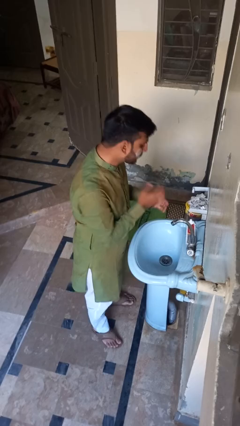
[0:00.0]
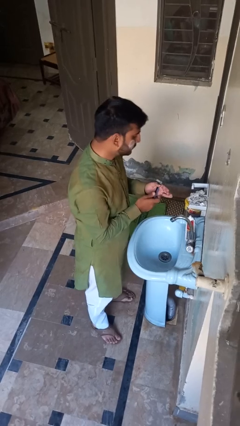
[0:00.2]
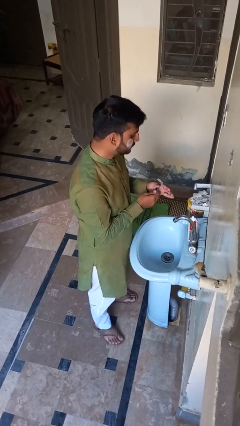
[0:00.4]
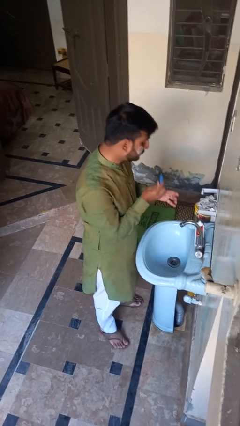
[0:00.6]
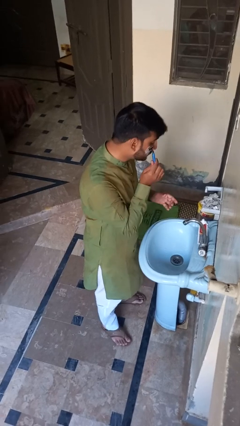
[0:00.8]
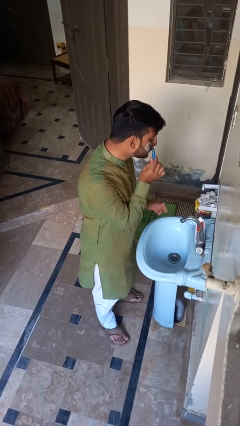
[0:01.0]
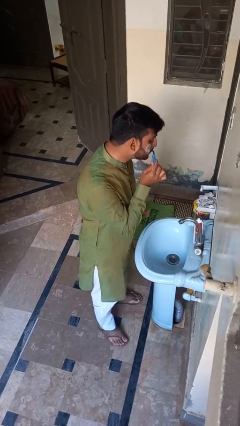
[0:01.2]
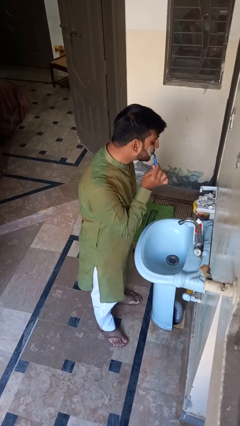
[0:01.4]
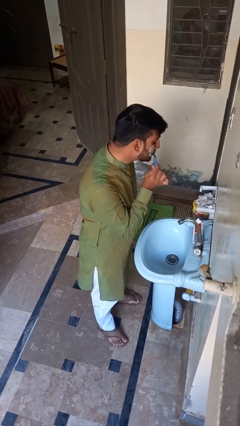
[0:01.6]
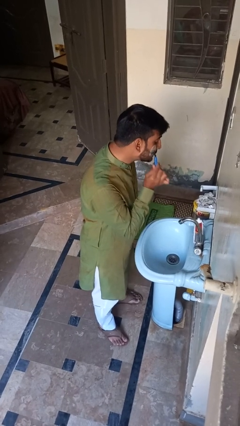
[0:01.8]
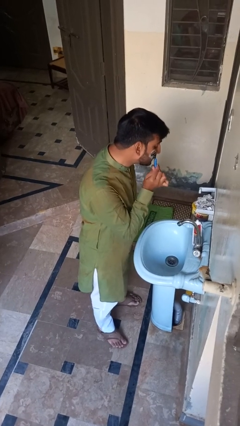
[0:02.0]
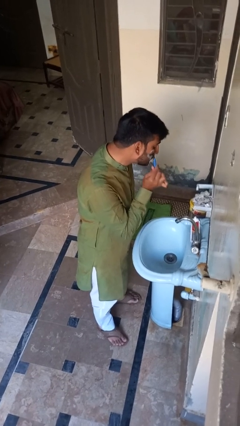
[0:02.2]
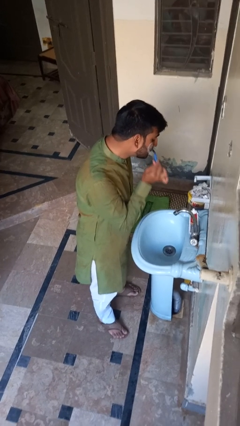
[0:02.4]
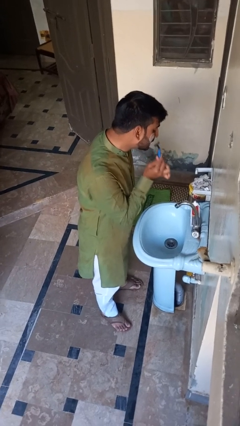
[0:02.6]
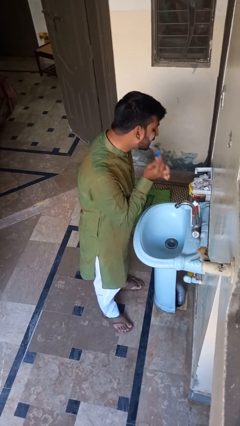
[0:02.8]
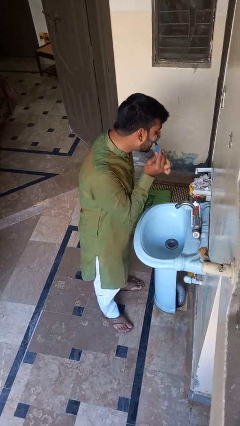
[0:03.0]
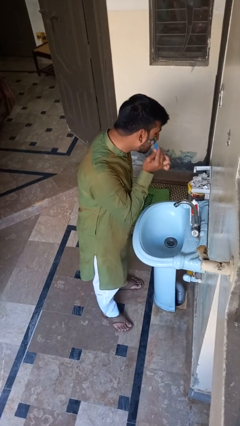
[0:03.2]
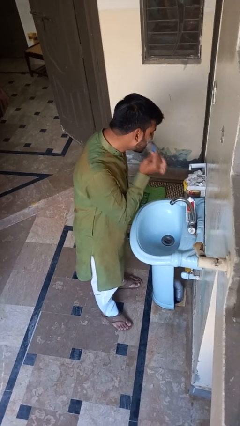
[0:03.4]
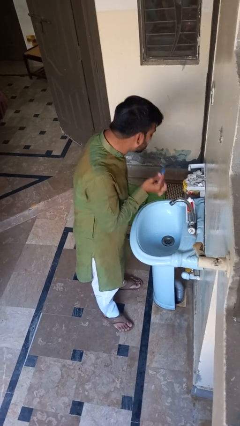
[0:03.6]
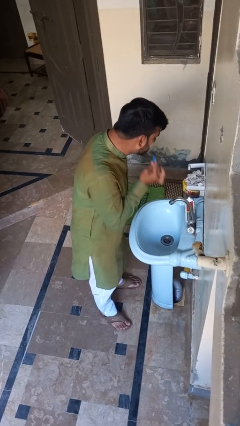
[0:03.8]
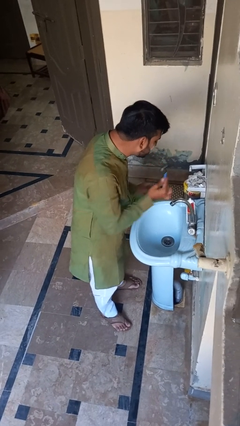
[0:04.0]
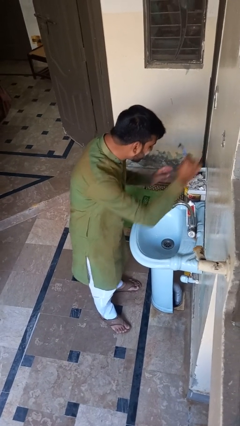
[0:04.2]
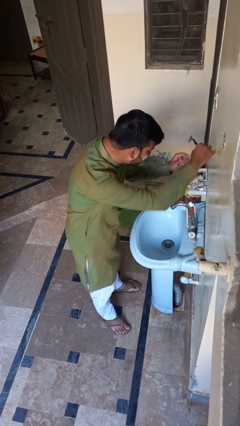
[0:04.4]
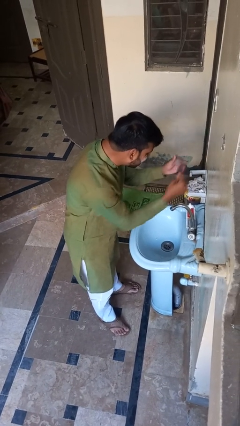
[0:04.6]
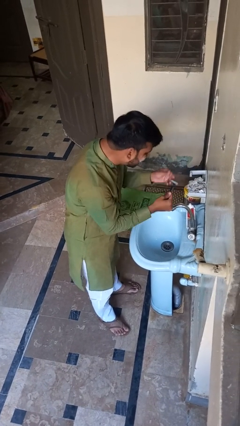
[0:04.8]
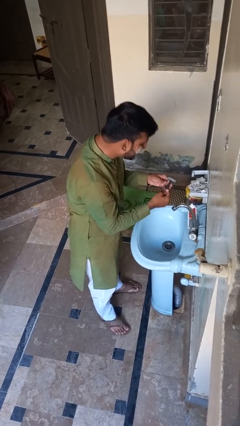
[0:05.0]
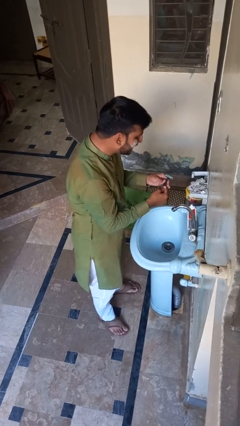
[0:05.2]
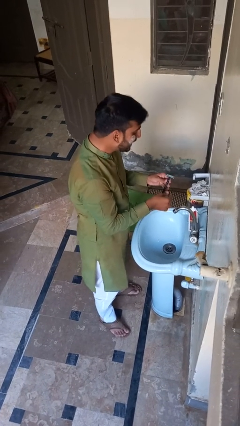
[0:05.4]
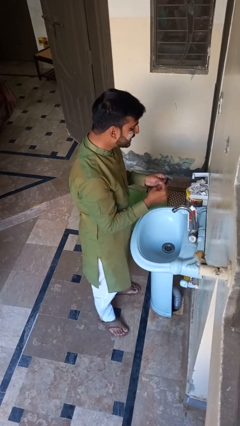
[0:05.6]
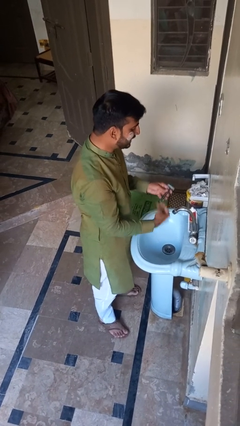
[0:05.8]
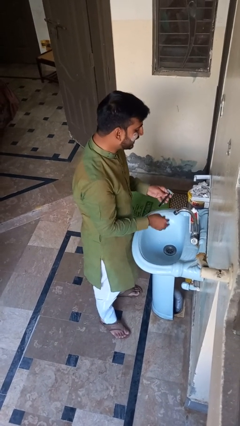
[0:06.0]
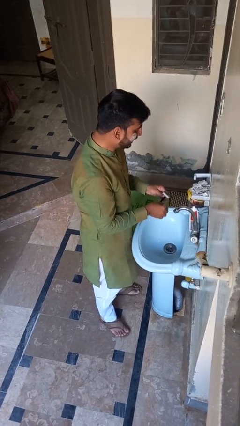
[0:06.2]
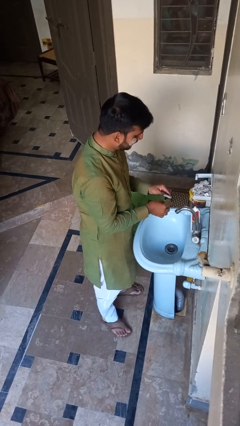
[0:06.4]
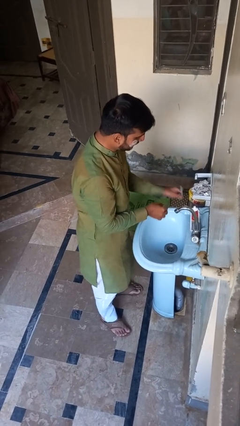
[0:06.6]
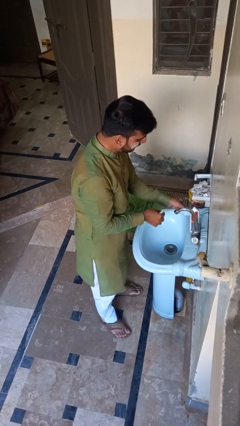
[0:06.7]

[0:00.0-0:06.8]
person shaves face

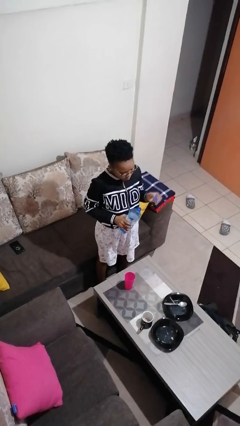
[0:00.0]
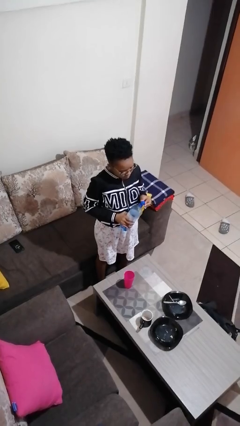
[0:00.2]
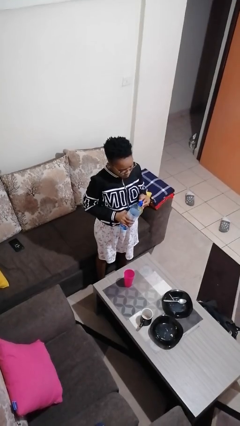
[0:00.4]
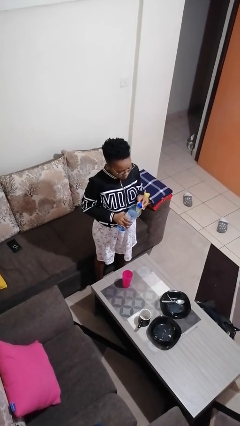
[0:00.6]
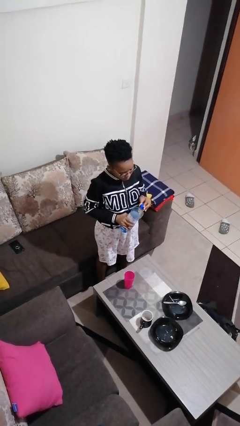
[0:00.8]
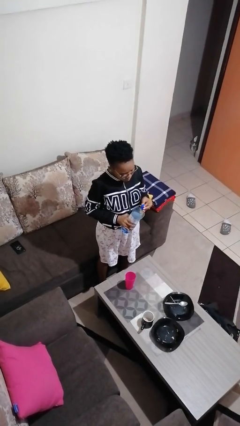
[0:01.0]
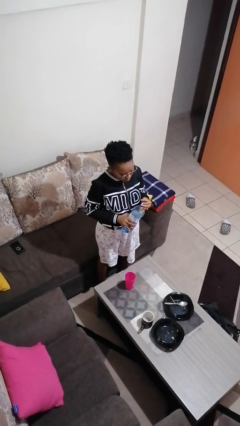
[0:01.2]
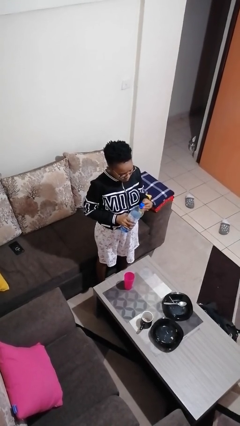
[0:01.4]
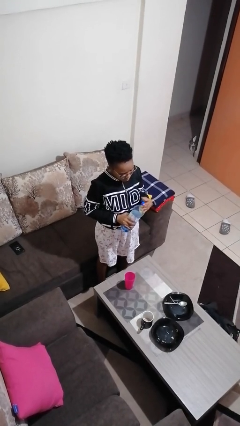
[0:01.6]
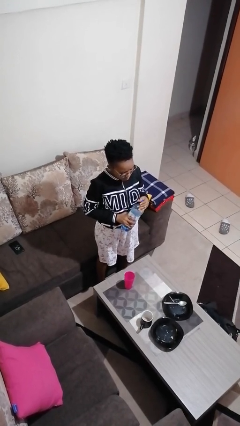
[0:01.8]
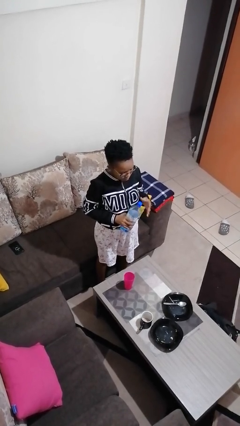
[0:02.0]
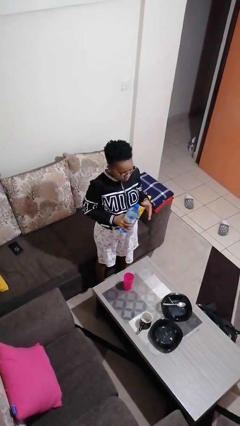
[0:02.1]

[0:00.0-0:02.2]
person screws lid to bottle

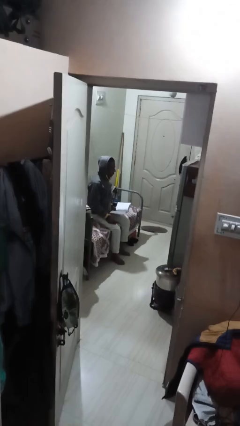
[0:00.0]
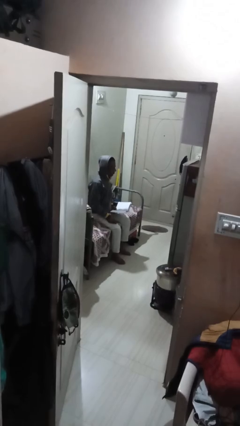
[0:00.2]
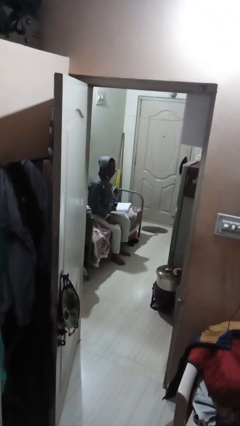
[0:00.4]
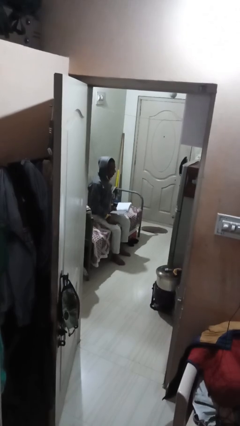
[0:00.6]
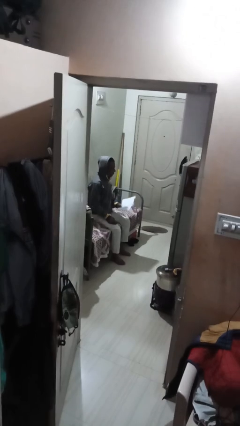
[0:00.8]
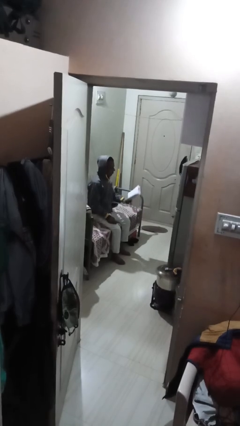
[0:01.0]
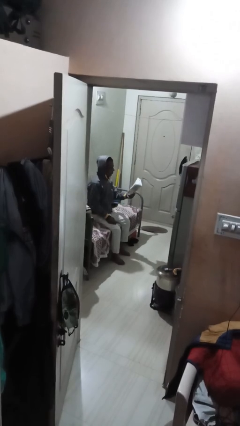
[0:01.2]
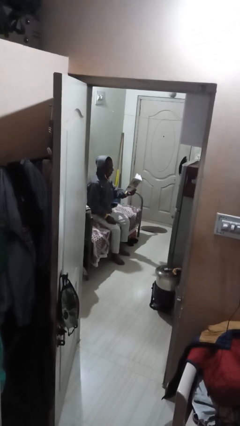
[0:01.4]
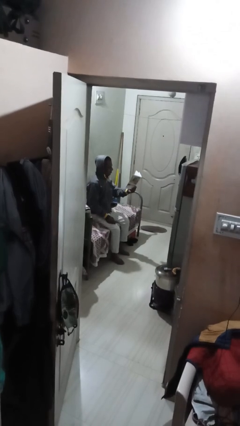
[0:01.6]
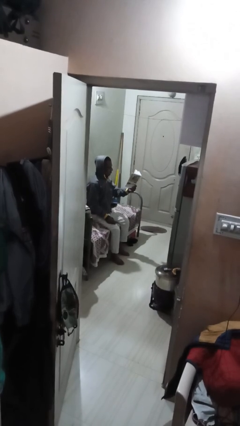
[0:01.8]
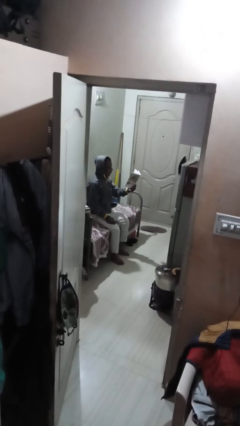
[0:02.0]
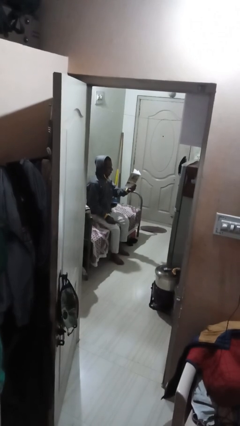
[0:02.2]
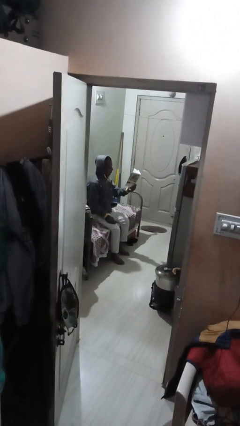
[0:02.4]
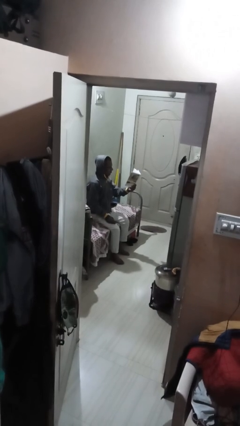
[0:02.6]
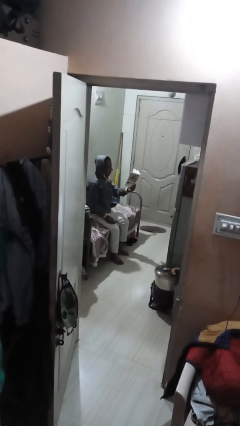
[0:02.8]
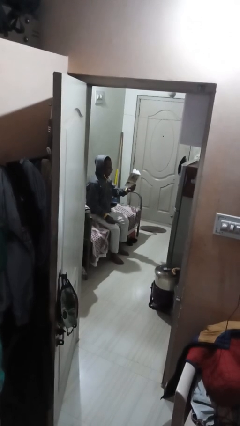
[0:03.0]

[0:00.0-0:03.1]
person reads document

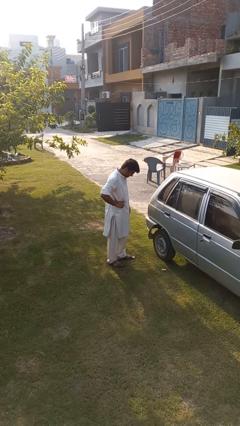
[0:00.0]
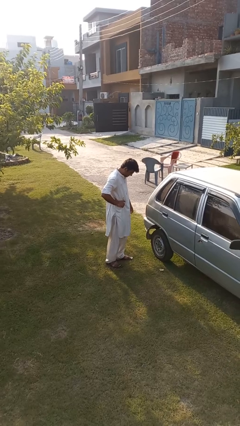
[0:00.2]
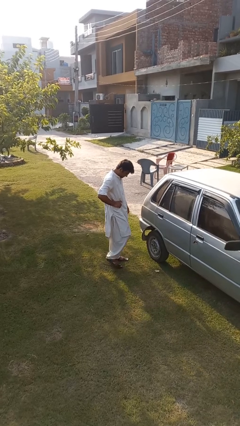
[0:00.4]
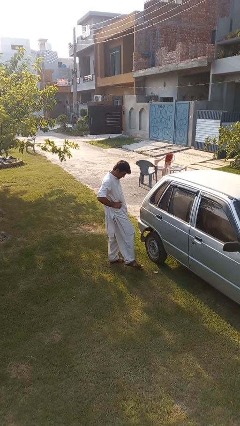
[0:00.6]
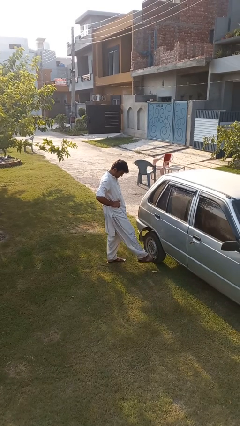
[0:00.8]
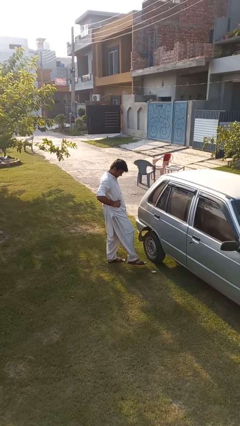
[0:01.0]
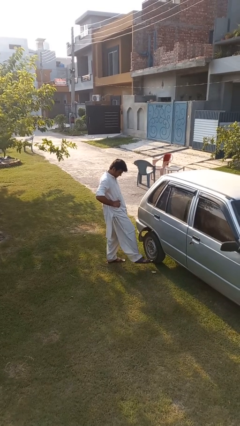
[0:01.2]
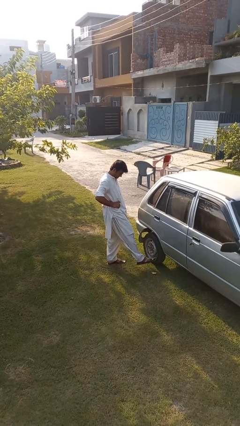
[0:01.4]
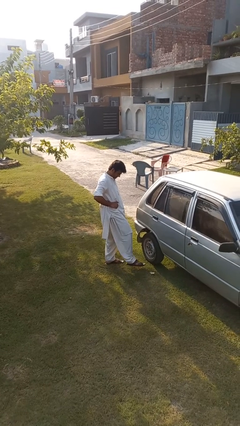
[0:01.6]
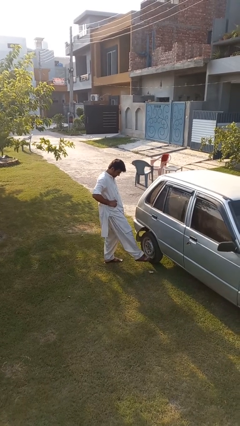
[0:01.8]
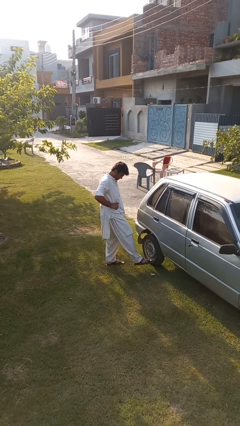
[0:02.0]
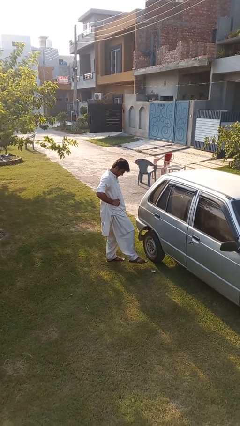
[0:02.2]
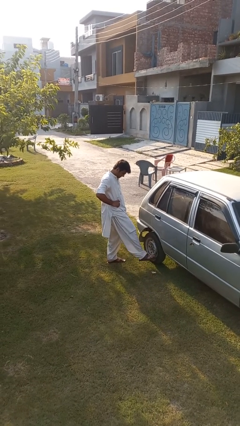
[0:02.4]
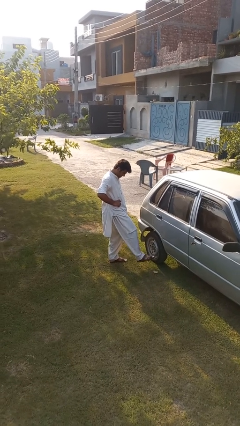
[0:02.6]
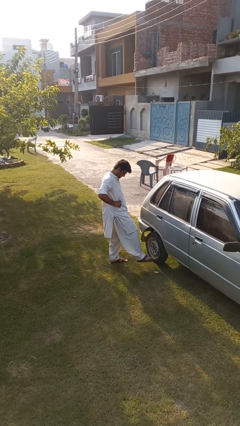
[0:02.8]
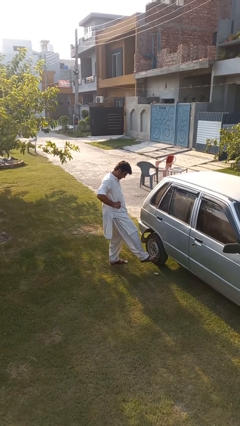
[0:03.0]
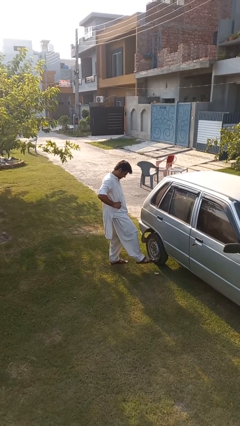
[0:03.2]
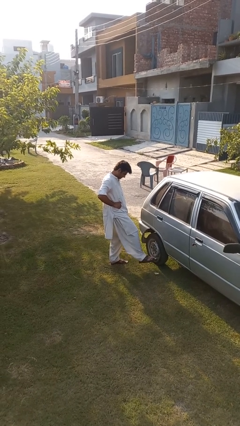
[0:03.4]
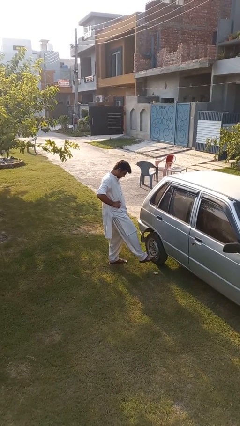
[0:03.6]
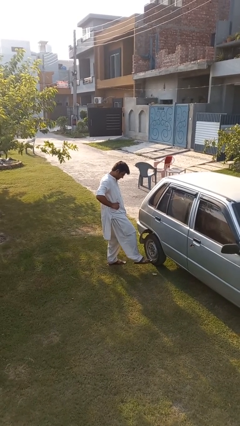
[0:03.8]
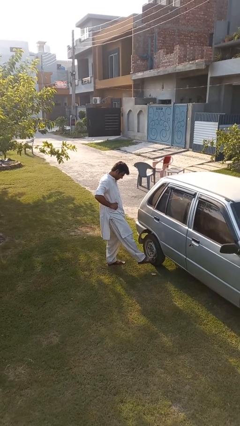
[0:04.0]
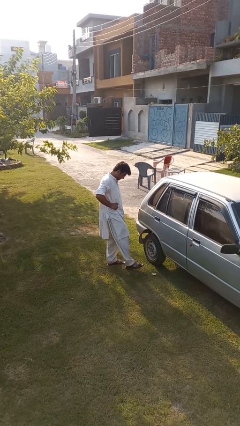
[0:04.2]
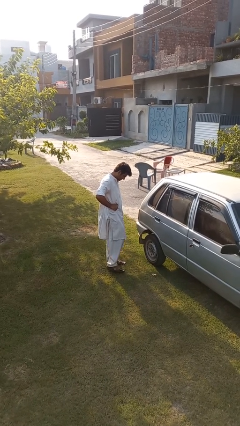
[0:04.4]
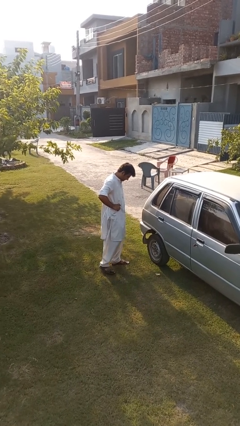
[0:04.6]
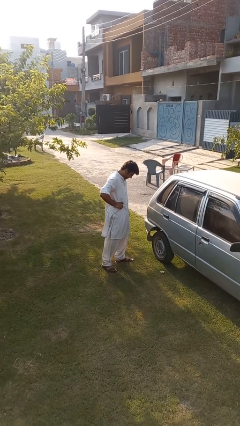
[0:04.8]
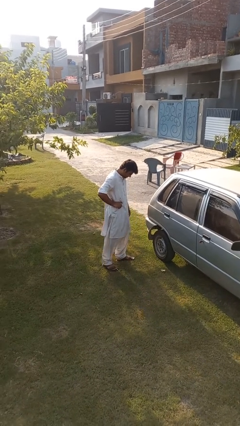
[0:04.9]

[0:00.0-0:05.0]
person kicks car tires

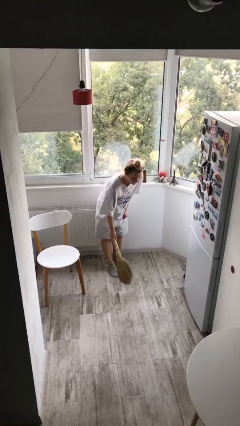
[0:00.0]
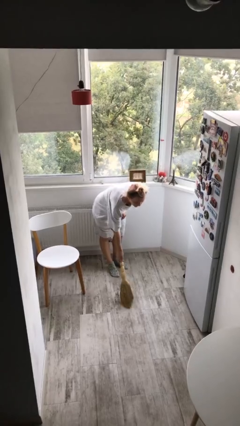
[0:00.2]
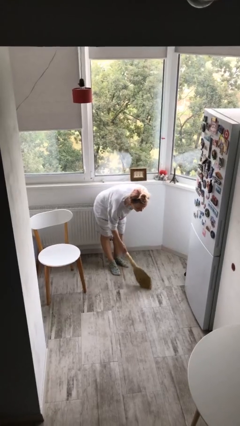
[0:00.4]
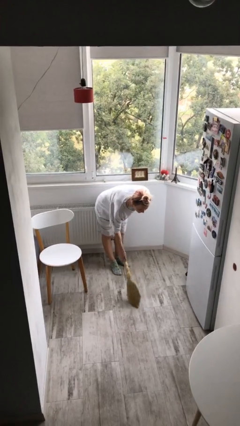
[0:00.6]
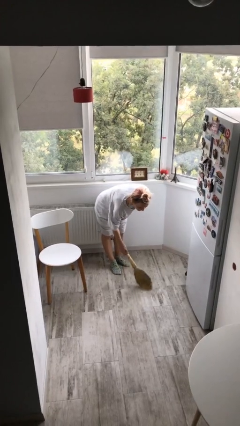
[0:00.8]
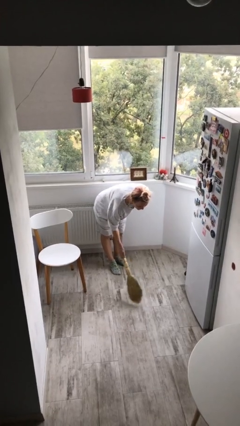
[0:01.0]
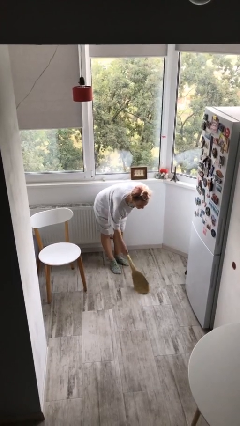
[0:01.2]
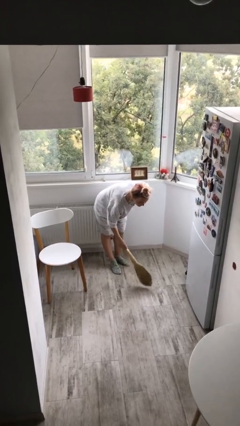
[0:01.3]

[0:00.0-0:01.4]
person sweeps floor
